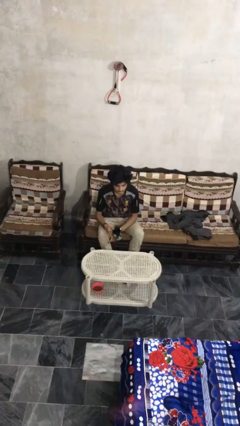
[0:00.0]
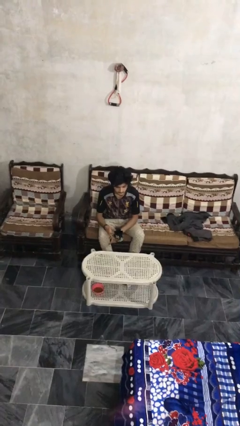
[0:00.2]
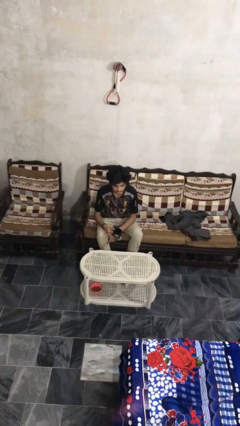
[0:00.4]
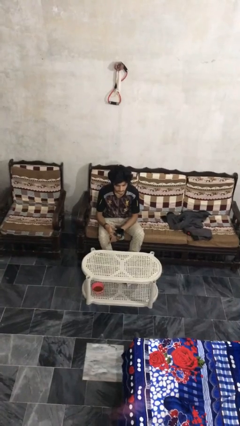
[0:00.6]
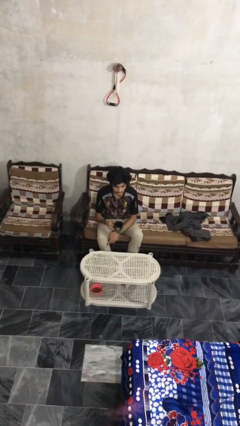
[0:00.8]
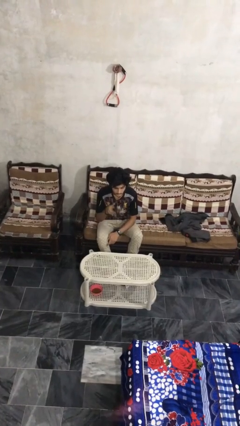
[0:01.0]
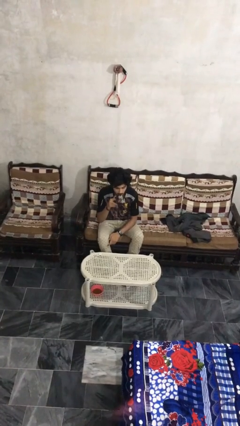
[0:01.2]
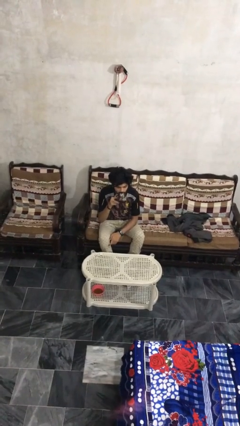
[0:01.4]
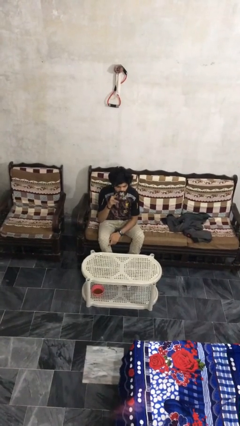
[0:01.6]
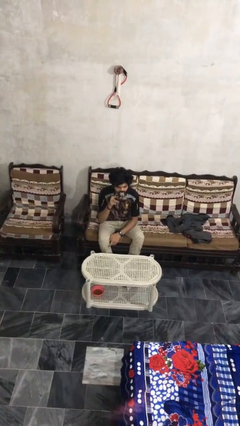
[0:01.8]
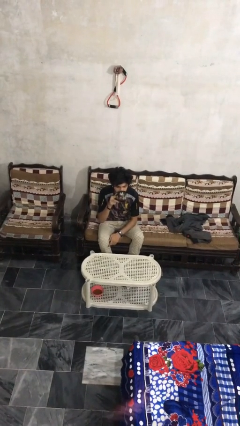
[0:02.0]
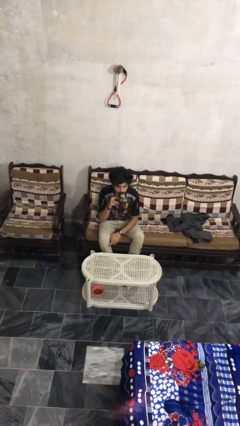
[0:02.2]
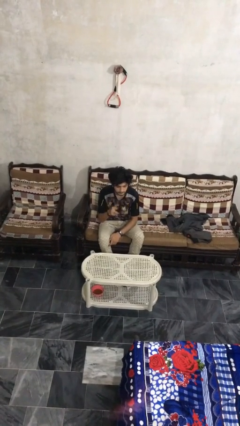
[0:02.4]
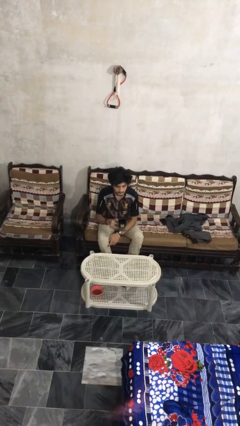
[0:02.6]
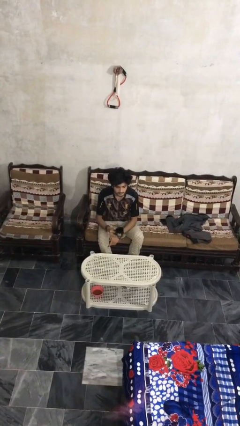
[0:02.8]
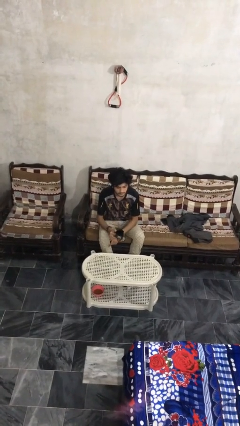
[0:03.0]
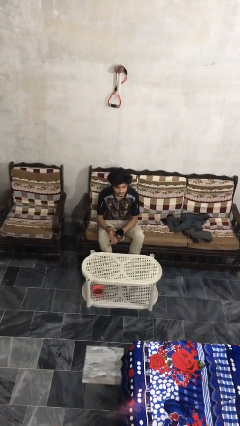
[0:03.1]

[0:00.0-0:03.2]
person drinks from mug

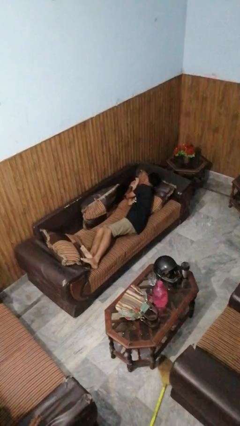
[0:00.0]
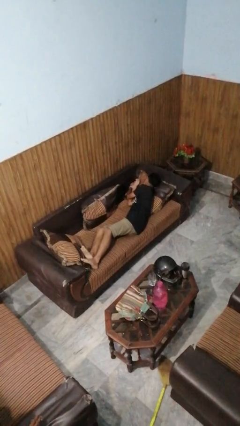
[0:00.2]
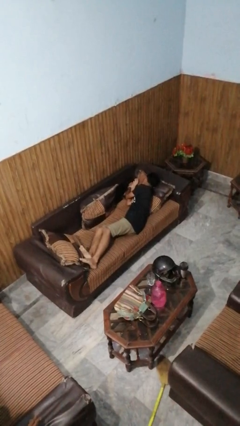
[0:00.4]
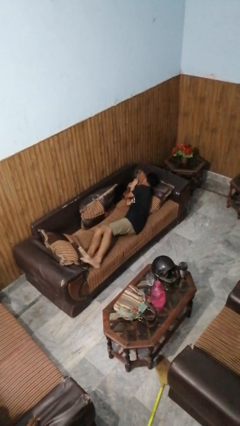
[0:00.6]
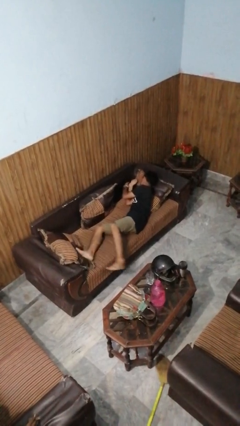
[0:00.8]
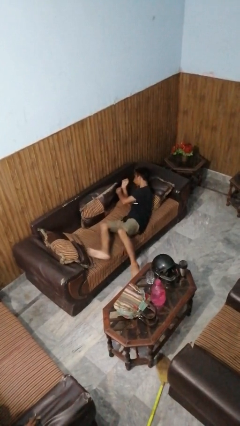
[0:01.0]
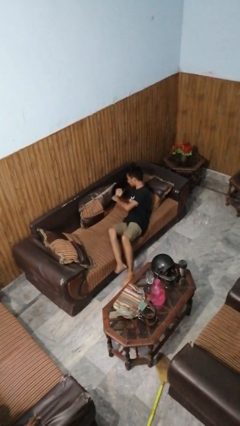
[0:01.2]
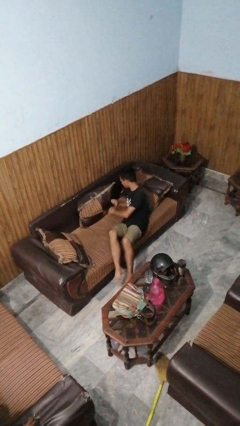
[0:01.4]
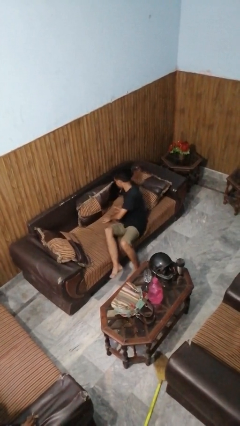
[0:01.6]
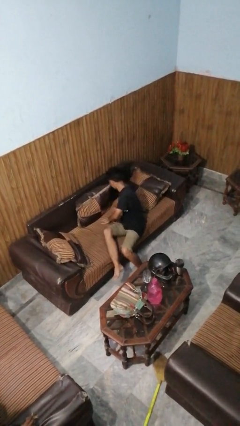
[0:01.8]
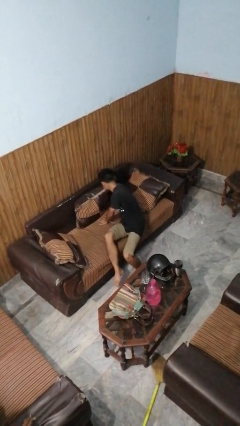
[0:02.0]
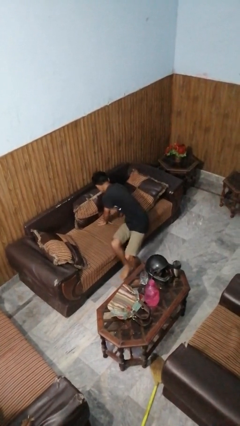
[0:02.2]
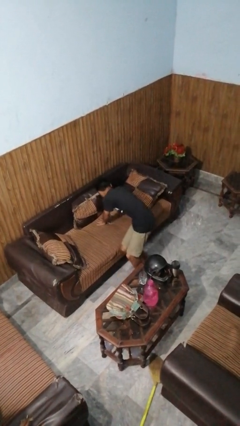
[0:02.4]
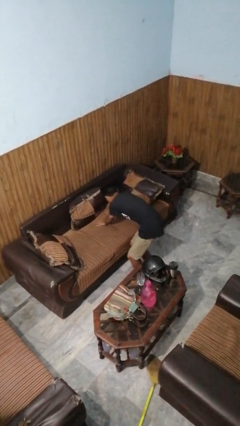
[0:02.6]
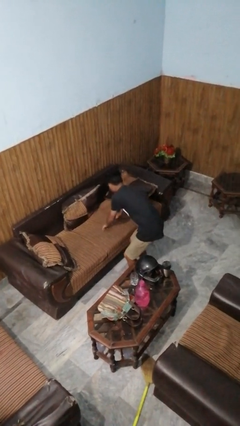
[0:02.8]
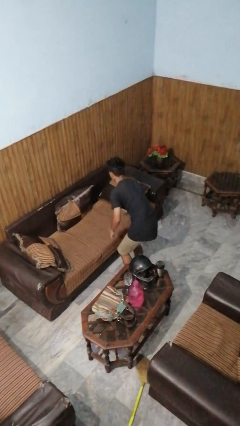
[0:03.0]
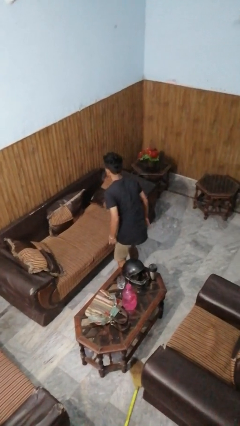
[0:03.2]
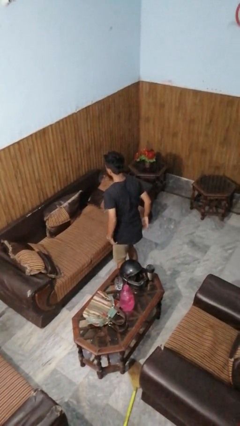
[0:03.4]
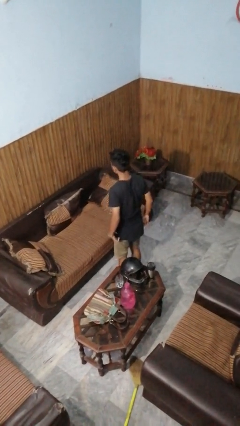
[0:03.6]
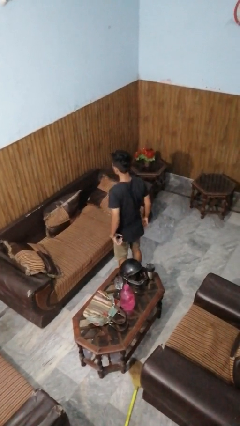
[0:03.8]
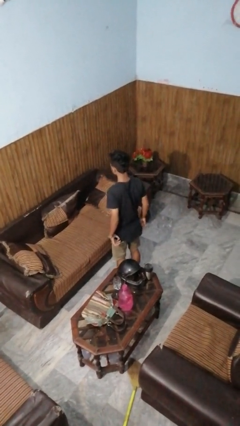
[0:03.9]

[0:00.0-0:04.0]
person stands up

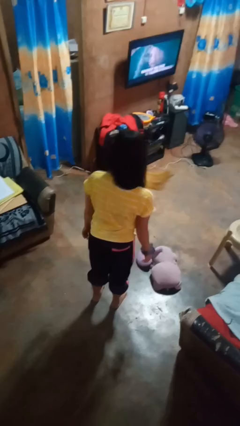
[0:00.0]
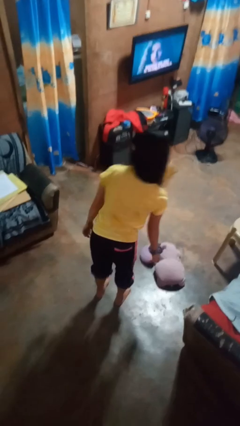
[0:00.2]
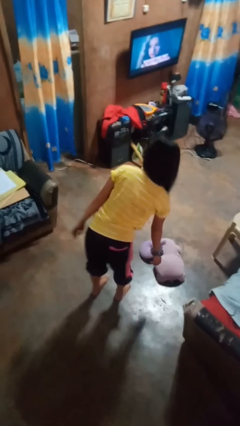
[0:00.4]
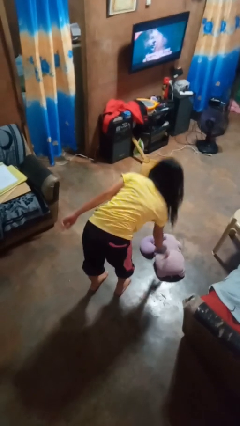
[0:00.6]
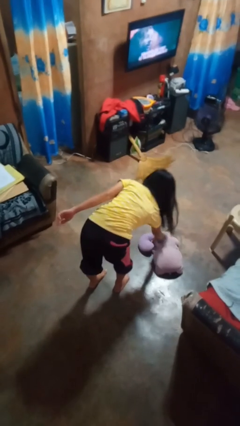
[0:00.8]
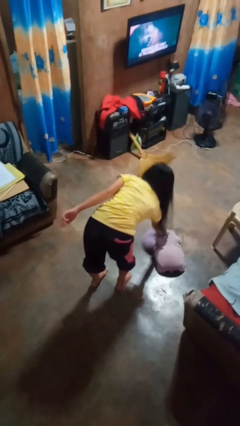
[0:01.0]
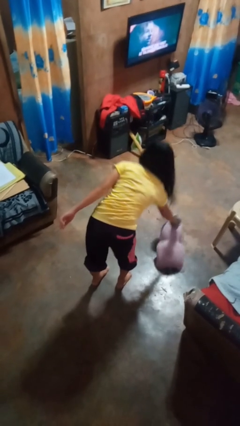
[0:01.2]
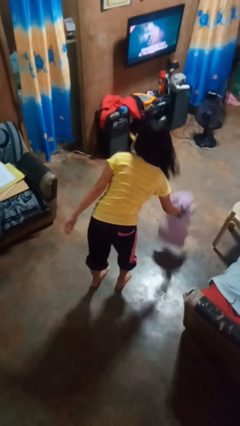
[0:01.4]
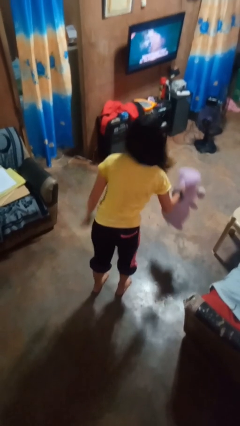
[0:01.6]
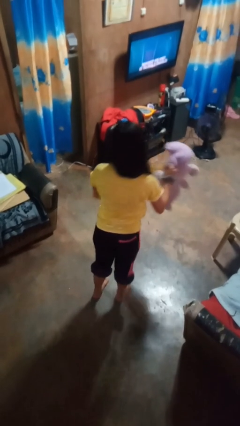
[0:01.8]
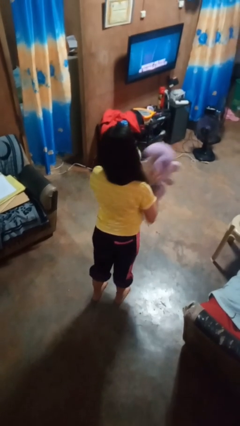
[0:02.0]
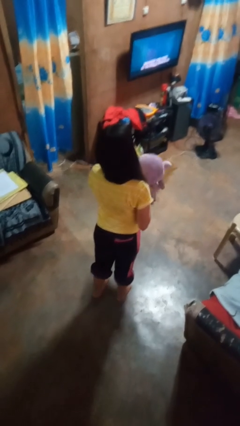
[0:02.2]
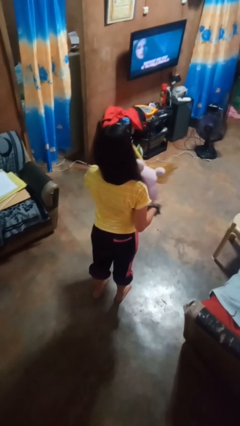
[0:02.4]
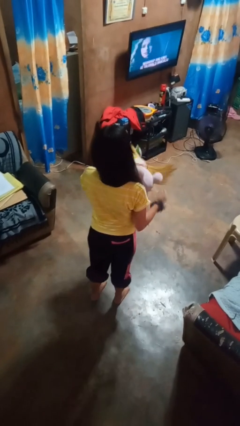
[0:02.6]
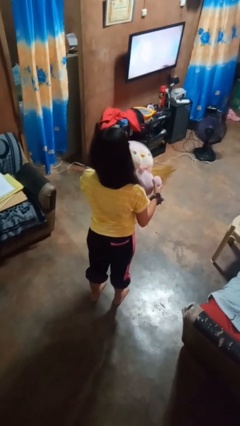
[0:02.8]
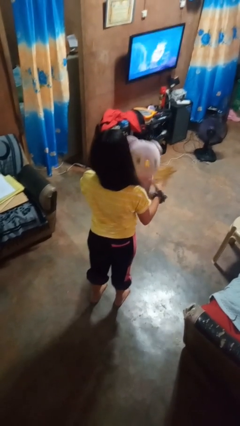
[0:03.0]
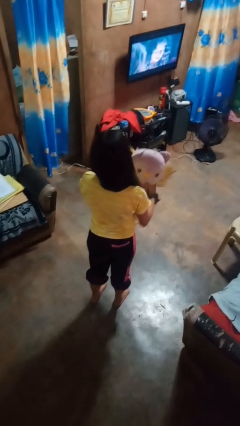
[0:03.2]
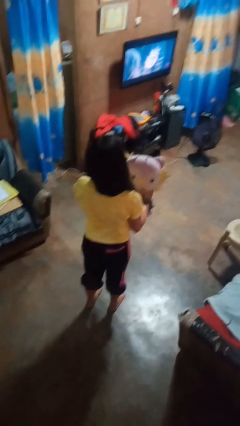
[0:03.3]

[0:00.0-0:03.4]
person picks up object from floor

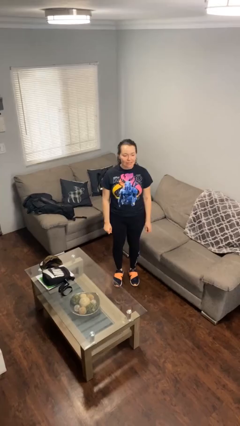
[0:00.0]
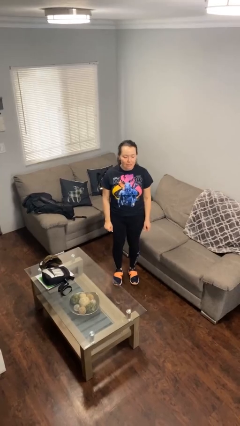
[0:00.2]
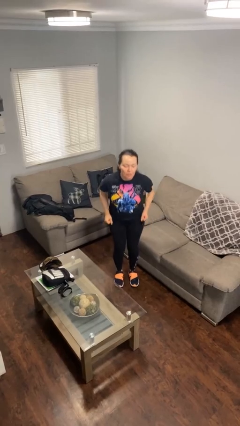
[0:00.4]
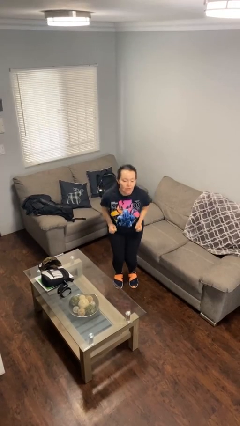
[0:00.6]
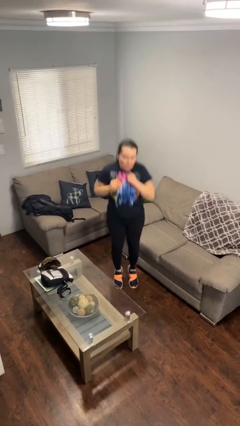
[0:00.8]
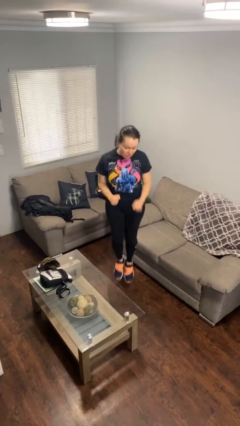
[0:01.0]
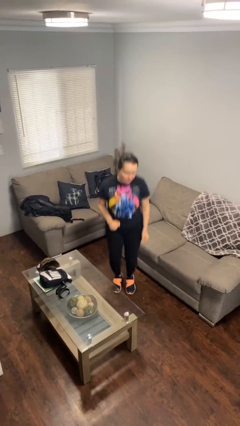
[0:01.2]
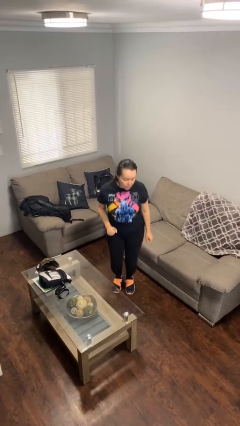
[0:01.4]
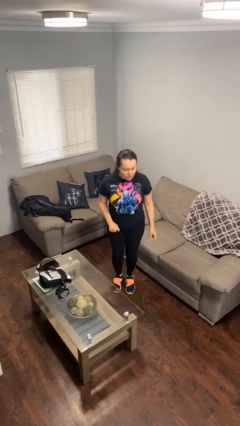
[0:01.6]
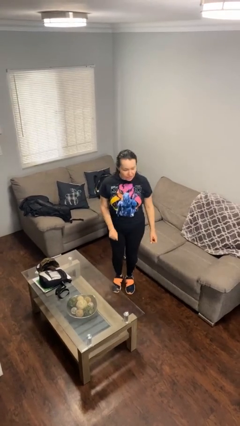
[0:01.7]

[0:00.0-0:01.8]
person jumps

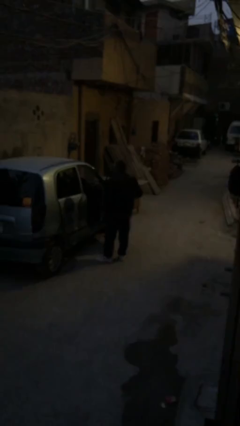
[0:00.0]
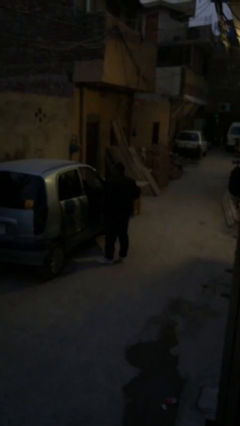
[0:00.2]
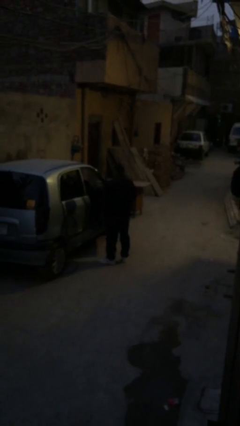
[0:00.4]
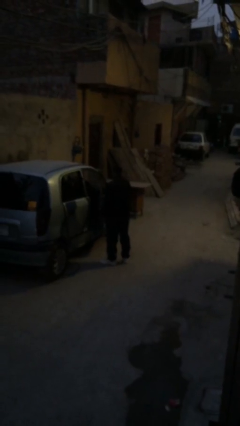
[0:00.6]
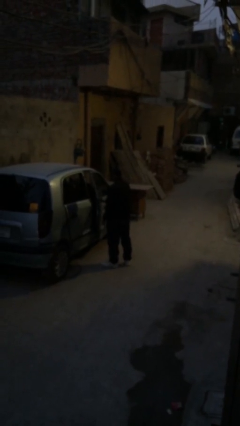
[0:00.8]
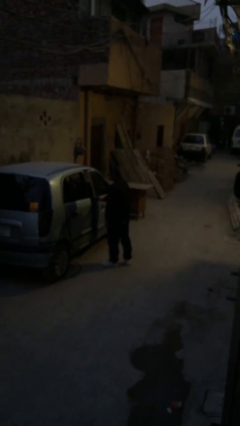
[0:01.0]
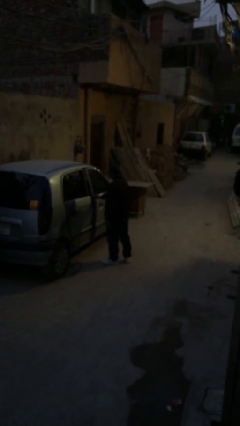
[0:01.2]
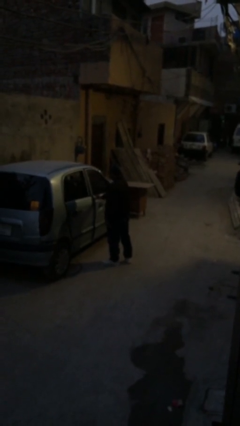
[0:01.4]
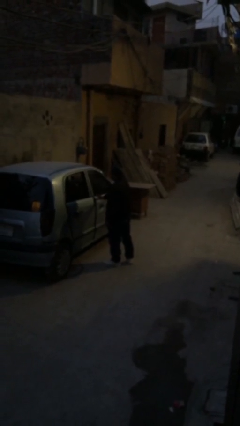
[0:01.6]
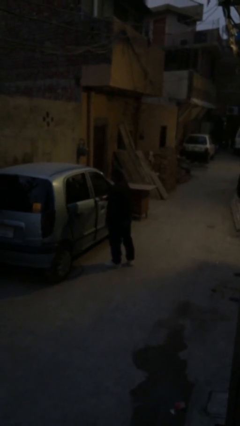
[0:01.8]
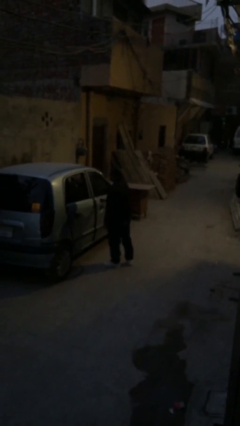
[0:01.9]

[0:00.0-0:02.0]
person closes car door

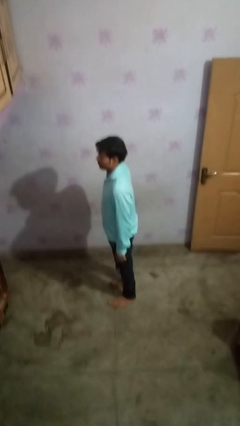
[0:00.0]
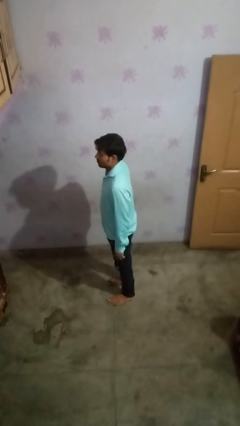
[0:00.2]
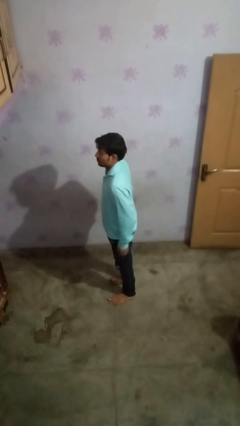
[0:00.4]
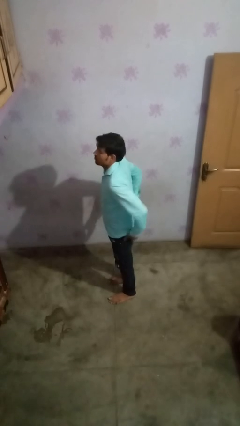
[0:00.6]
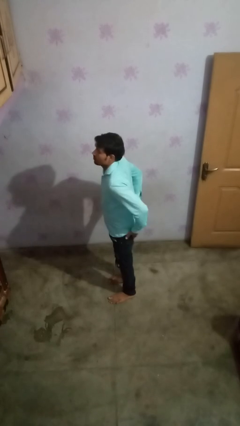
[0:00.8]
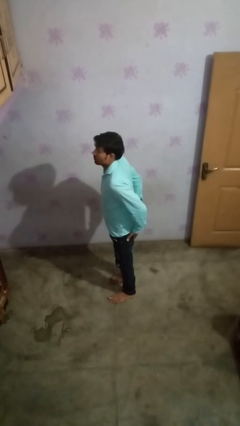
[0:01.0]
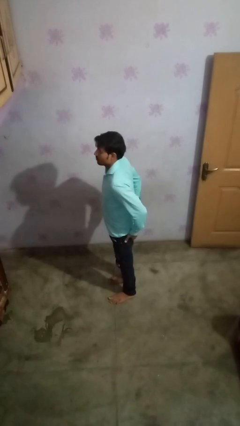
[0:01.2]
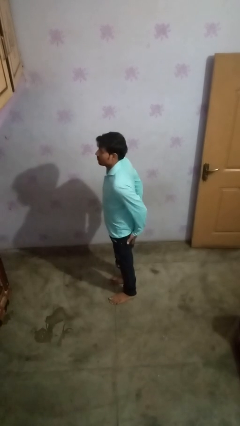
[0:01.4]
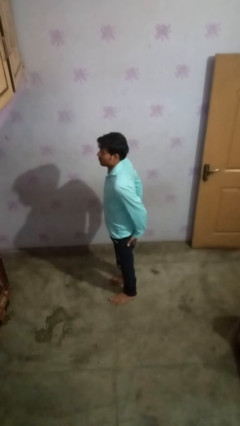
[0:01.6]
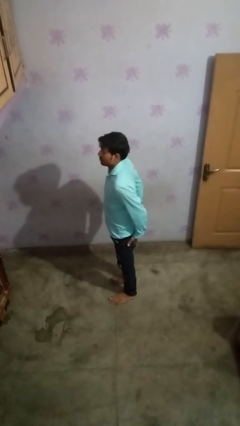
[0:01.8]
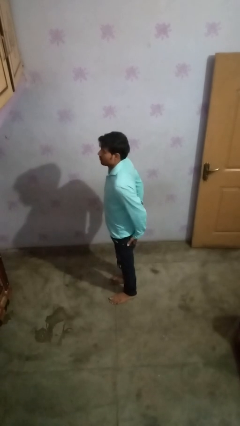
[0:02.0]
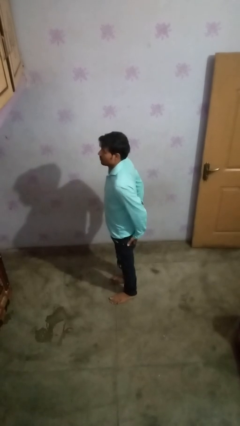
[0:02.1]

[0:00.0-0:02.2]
person puts hands in back pockets

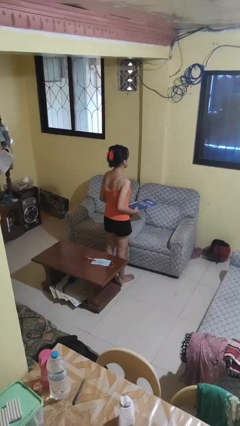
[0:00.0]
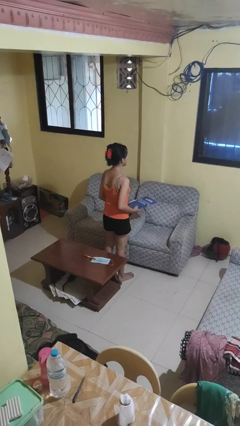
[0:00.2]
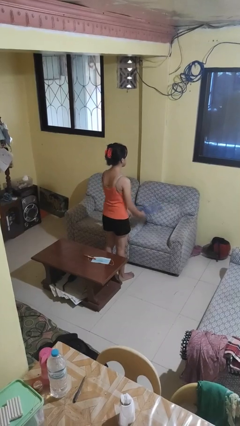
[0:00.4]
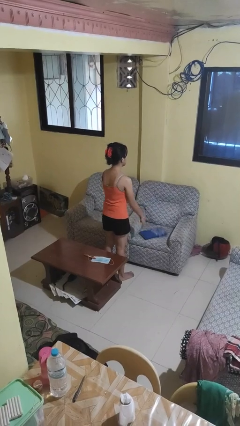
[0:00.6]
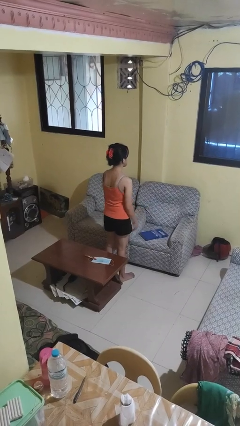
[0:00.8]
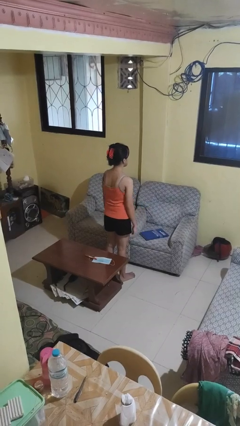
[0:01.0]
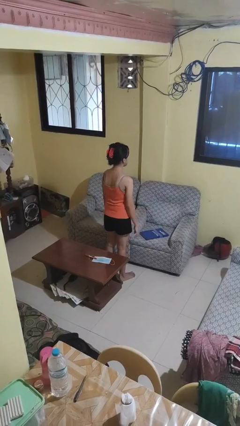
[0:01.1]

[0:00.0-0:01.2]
person puts down object on couch
